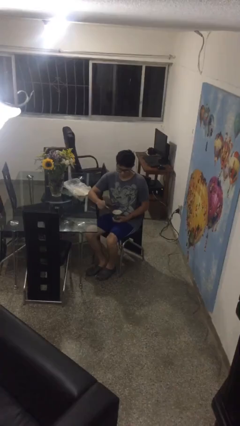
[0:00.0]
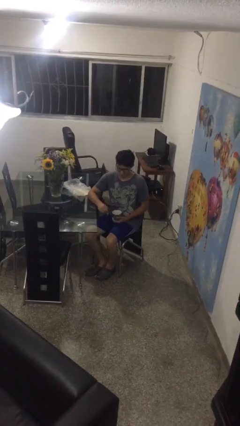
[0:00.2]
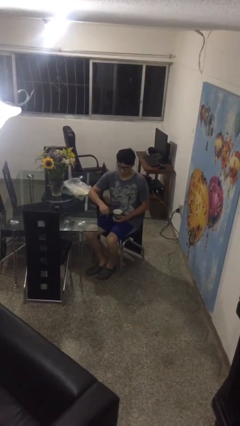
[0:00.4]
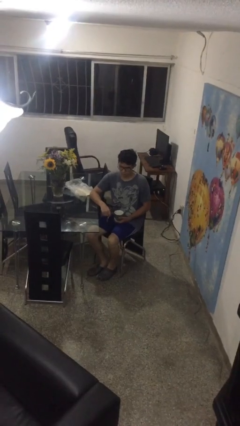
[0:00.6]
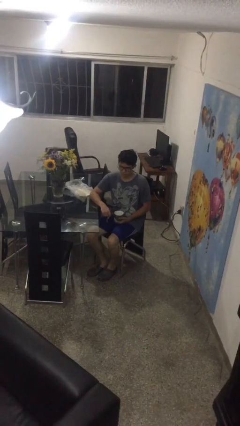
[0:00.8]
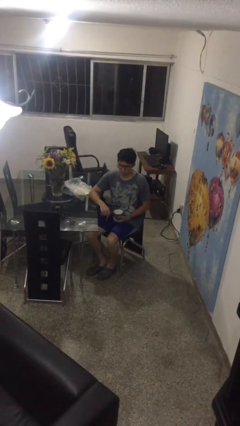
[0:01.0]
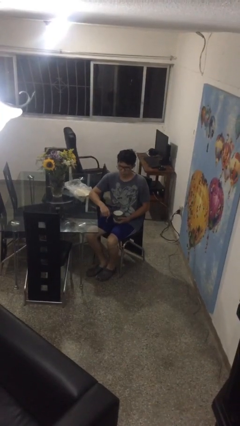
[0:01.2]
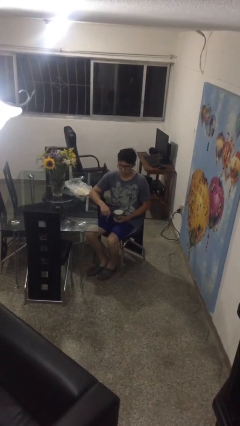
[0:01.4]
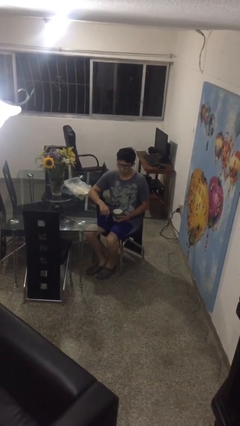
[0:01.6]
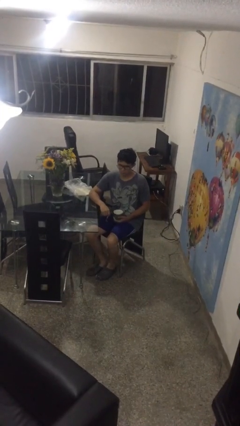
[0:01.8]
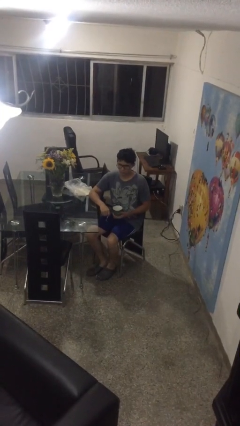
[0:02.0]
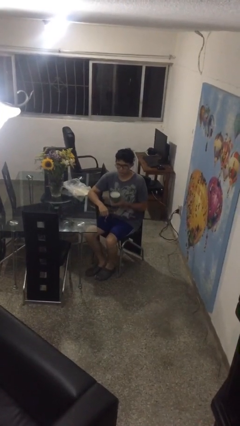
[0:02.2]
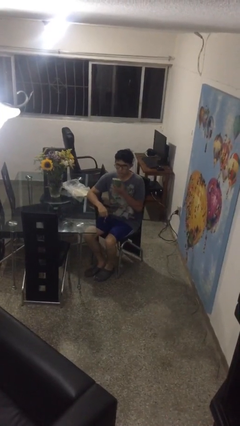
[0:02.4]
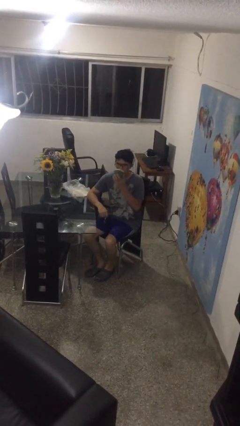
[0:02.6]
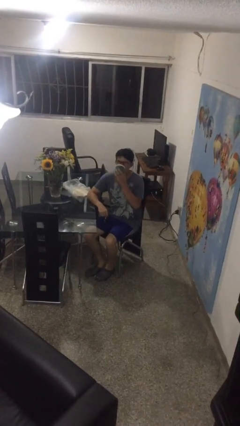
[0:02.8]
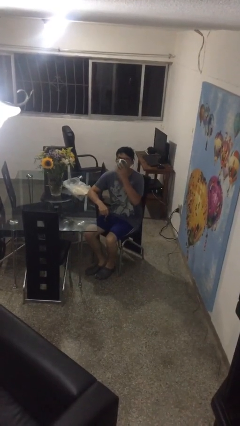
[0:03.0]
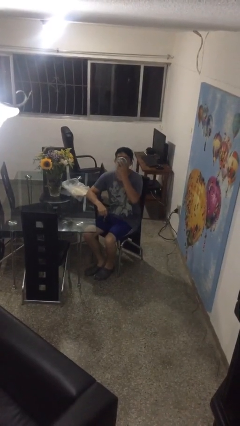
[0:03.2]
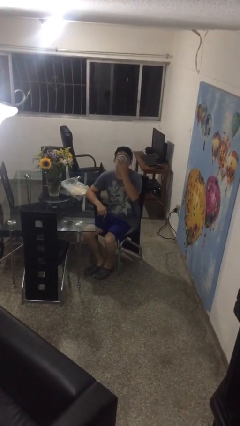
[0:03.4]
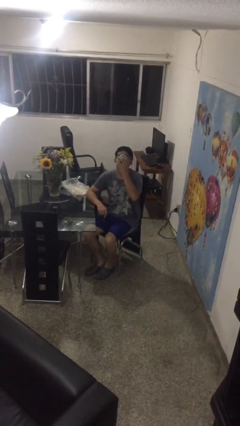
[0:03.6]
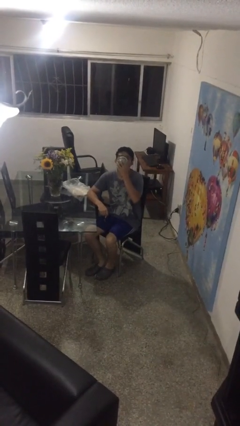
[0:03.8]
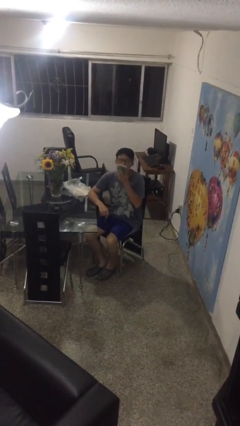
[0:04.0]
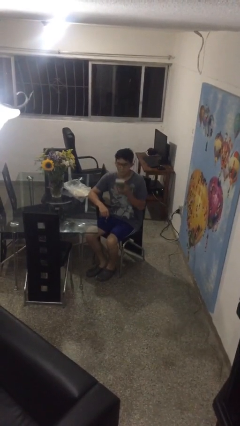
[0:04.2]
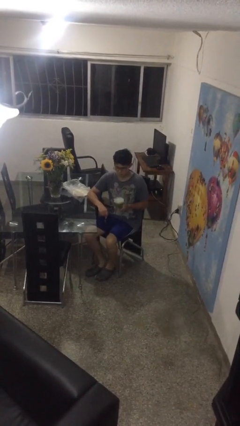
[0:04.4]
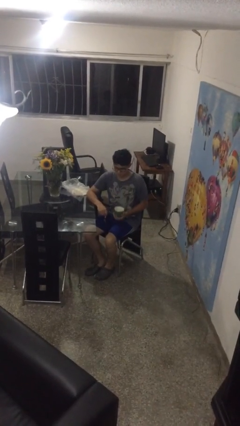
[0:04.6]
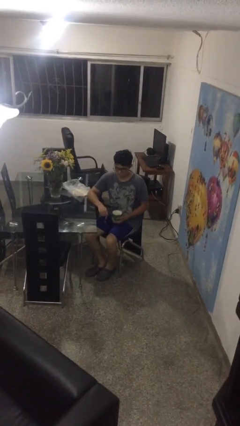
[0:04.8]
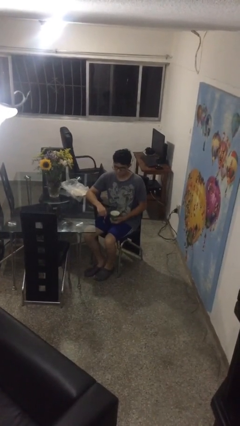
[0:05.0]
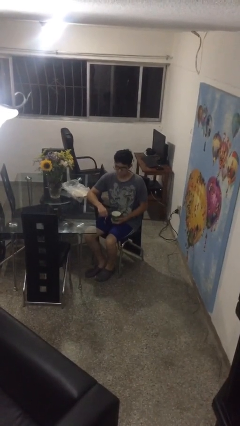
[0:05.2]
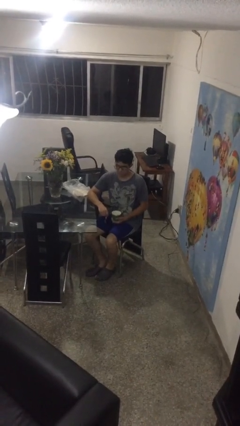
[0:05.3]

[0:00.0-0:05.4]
person drinks from mug

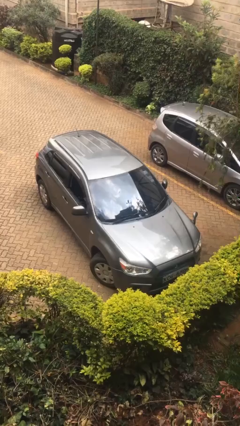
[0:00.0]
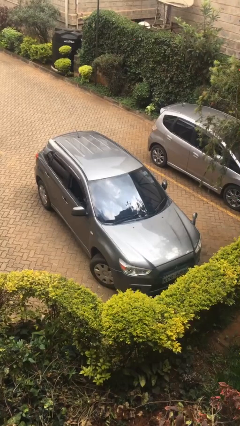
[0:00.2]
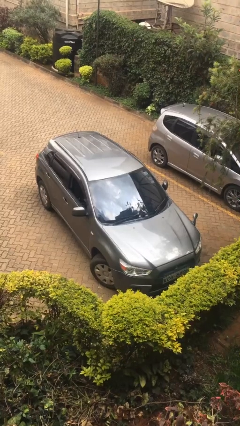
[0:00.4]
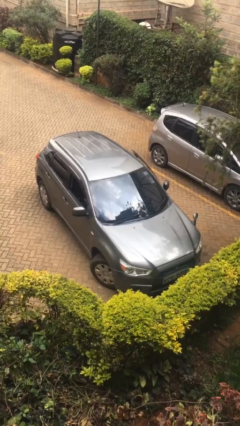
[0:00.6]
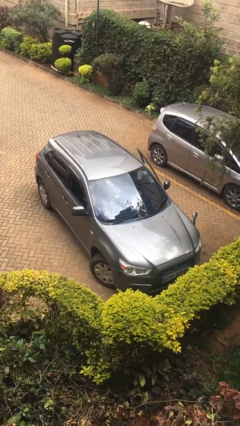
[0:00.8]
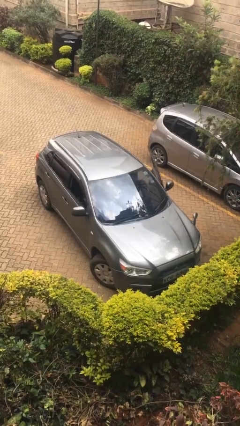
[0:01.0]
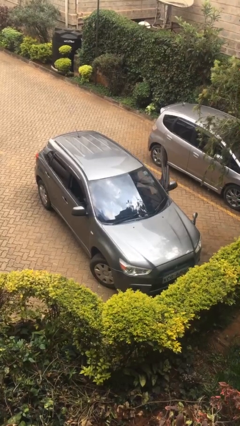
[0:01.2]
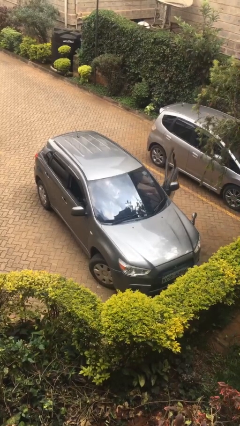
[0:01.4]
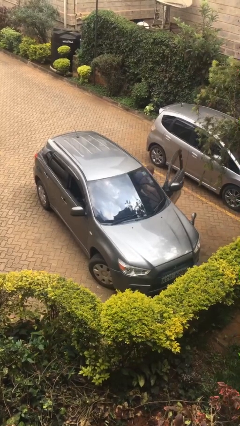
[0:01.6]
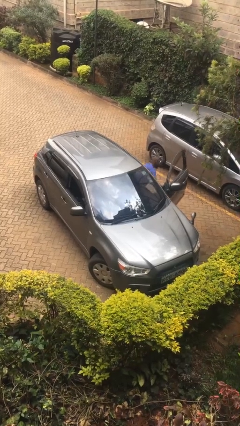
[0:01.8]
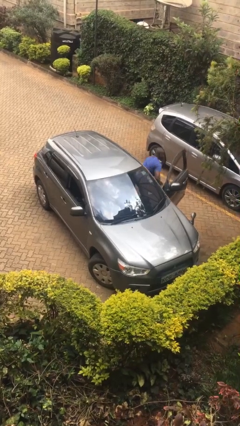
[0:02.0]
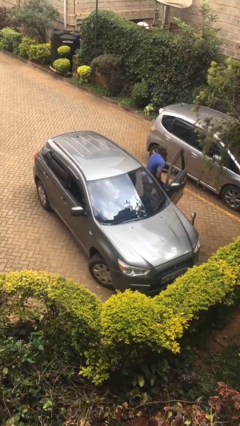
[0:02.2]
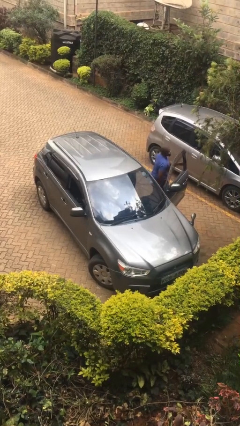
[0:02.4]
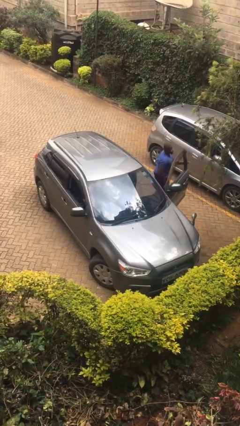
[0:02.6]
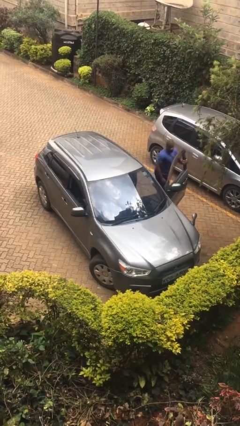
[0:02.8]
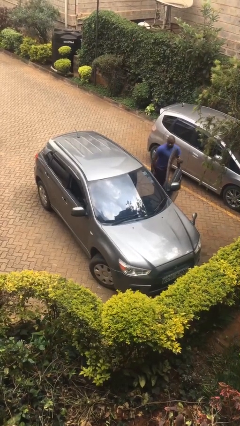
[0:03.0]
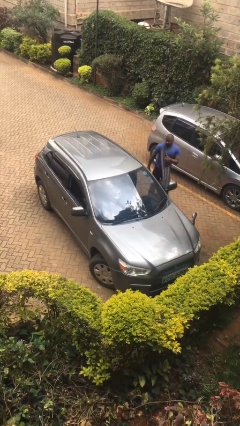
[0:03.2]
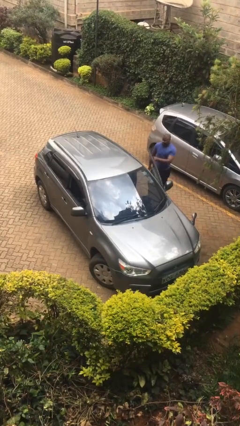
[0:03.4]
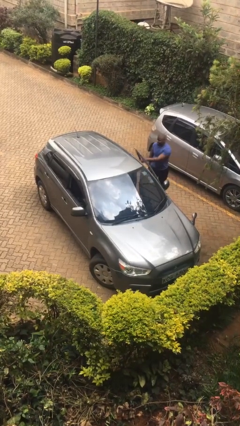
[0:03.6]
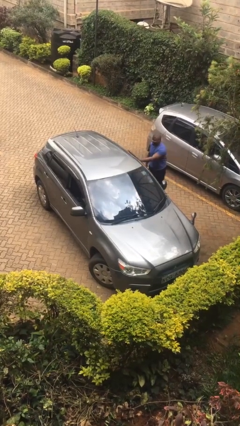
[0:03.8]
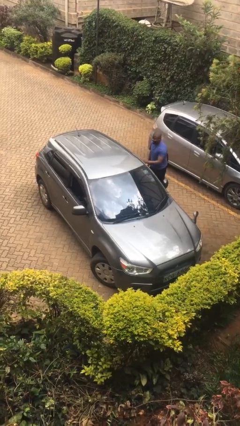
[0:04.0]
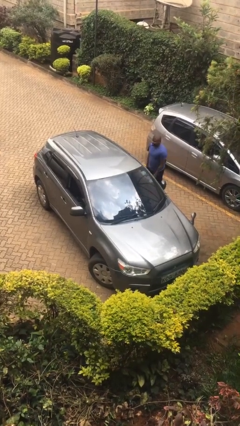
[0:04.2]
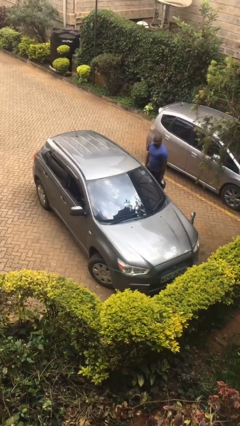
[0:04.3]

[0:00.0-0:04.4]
car drops off person

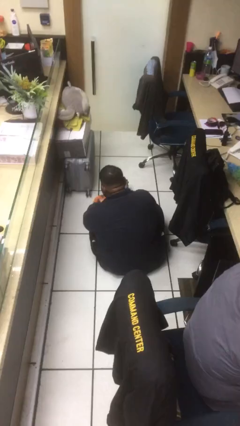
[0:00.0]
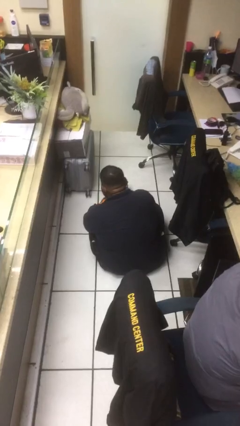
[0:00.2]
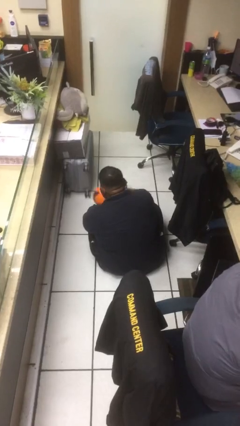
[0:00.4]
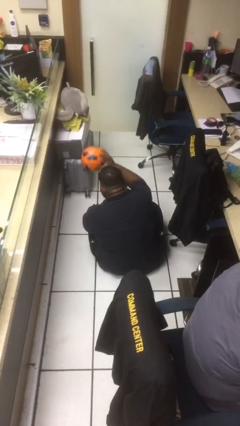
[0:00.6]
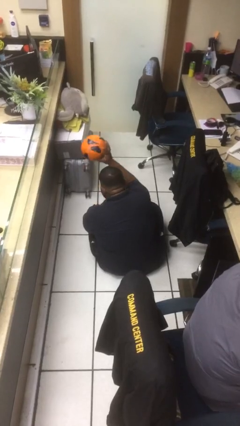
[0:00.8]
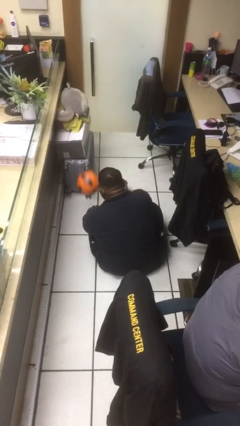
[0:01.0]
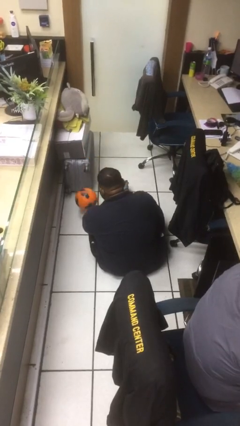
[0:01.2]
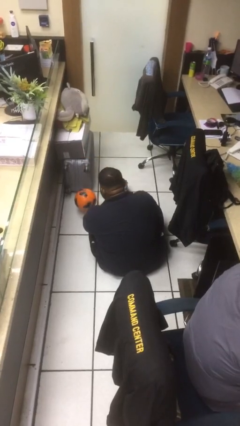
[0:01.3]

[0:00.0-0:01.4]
person bounces ball on floor

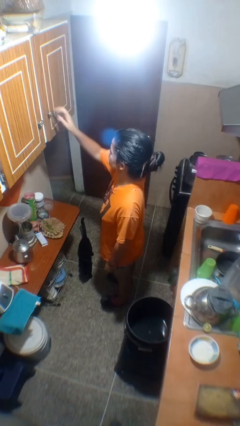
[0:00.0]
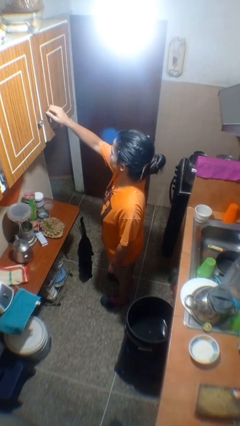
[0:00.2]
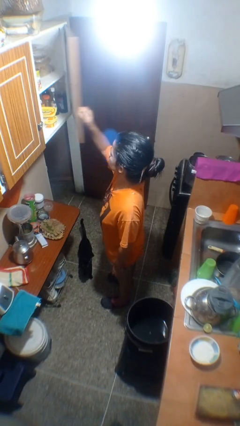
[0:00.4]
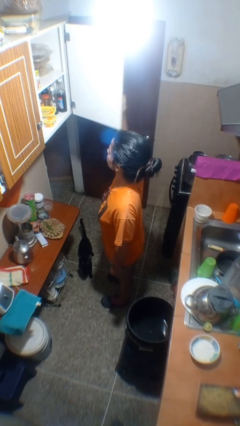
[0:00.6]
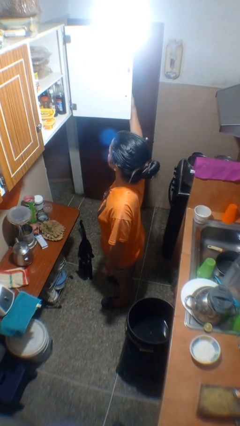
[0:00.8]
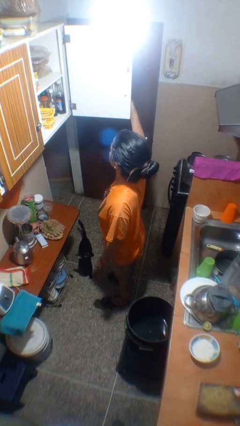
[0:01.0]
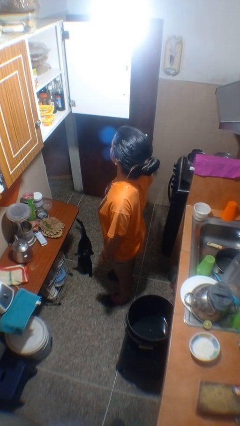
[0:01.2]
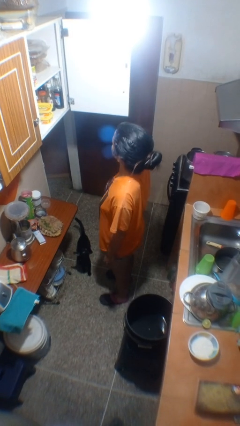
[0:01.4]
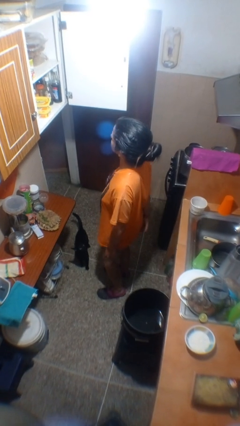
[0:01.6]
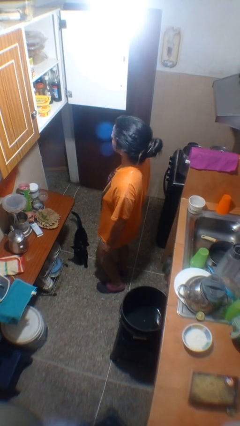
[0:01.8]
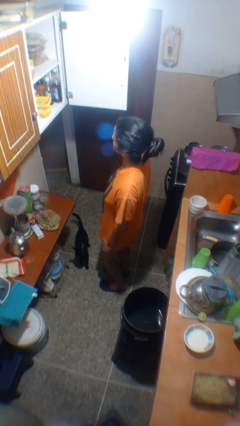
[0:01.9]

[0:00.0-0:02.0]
person opens cabinet

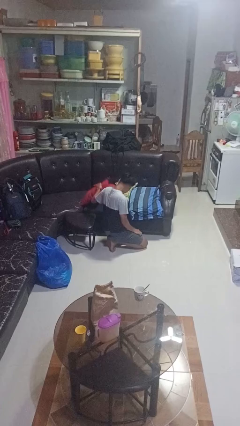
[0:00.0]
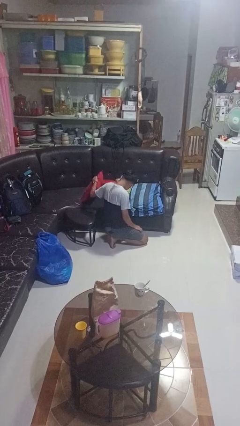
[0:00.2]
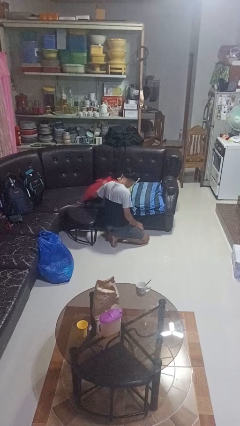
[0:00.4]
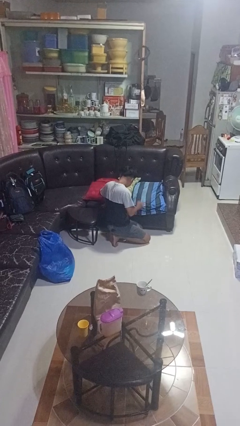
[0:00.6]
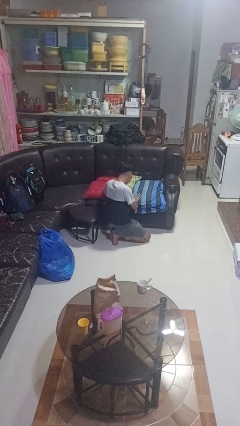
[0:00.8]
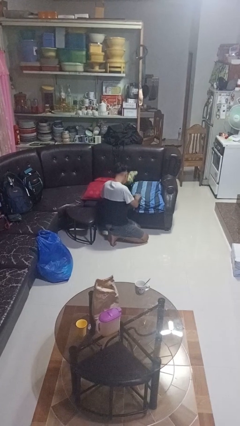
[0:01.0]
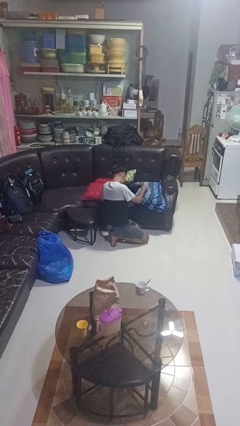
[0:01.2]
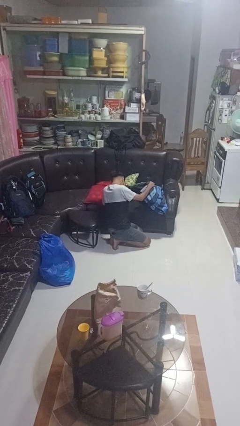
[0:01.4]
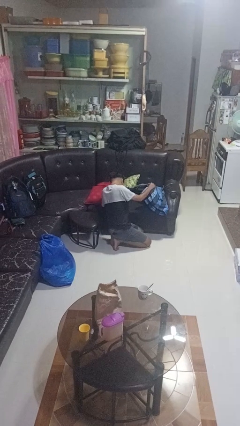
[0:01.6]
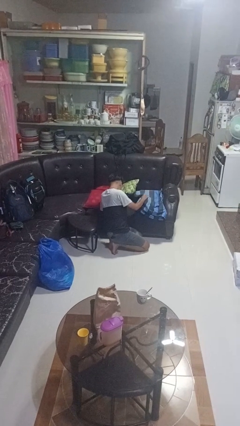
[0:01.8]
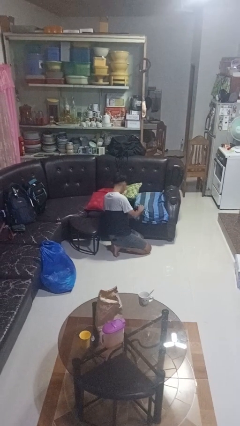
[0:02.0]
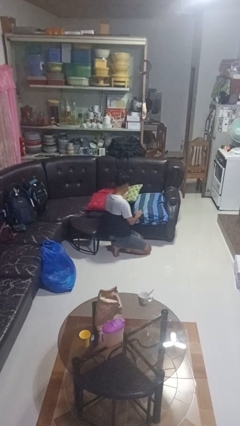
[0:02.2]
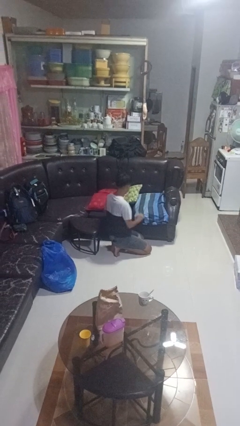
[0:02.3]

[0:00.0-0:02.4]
person searches in couch

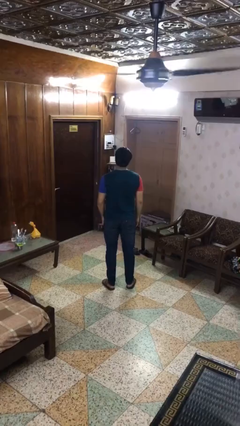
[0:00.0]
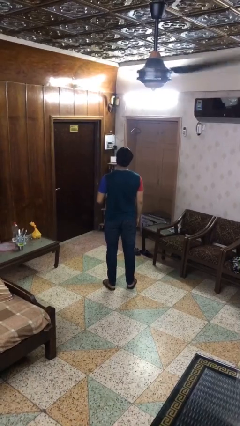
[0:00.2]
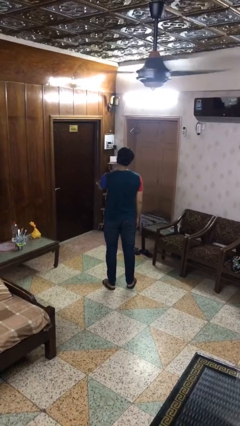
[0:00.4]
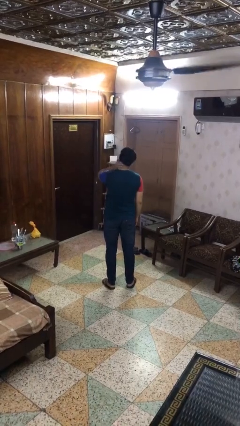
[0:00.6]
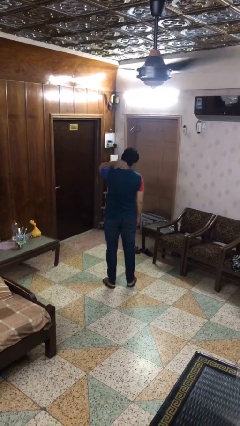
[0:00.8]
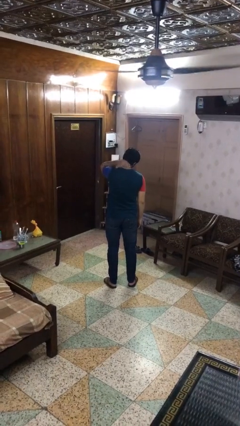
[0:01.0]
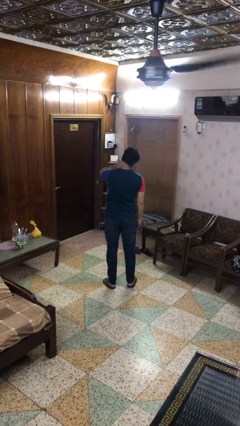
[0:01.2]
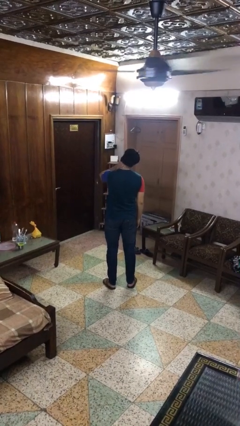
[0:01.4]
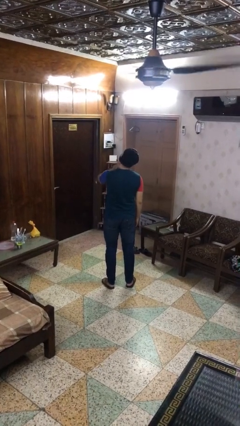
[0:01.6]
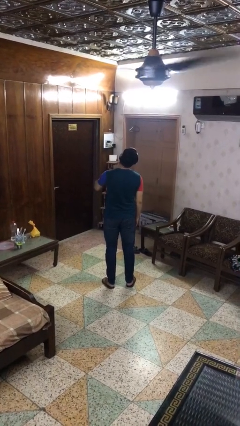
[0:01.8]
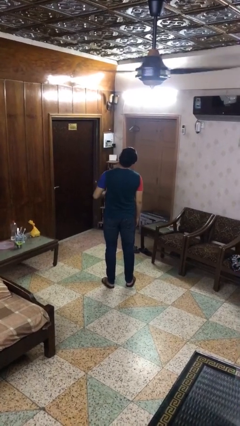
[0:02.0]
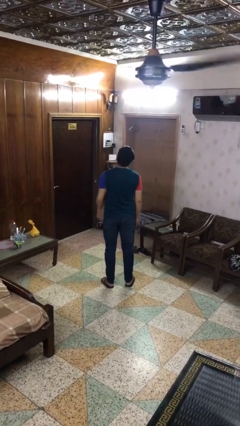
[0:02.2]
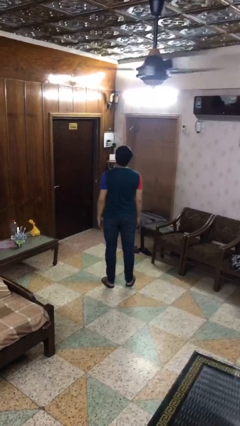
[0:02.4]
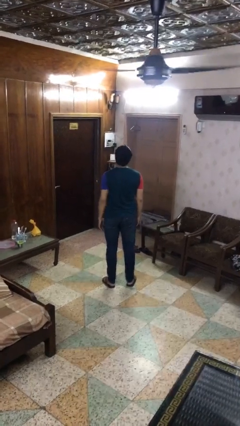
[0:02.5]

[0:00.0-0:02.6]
person rubs neck
